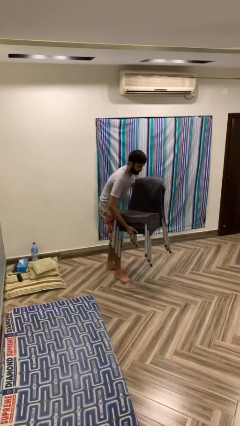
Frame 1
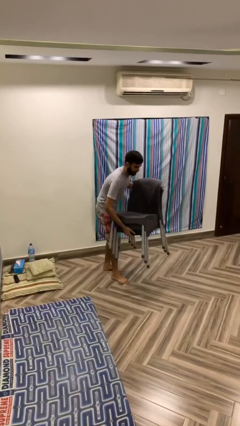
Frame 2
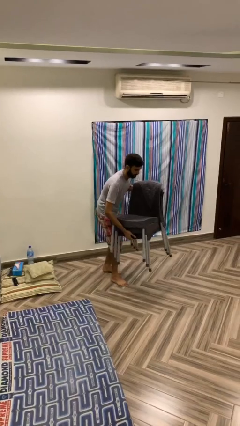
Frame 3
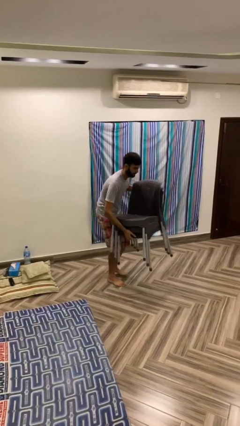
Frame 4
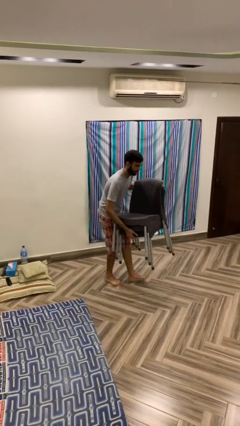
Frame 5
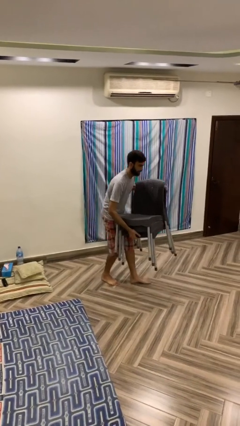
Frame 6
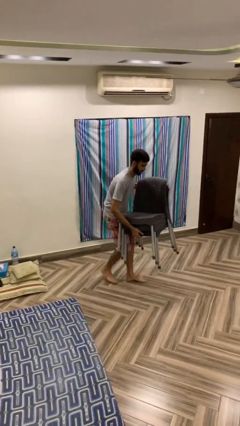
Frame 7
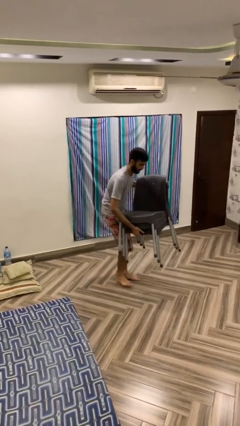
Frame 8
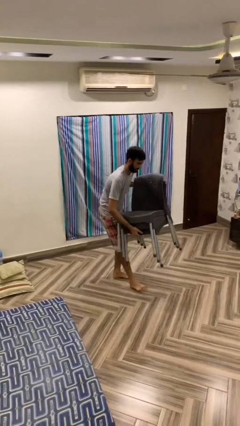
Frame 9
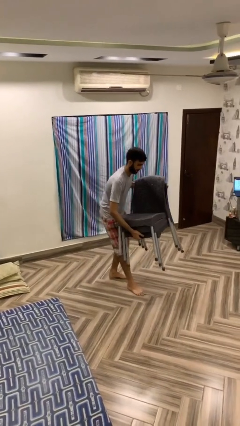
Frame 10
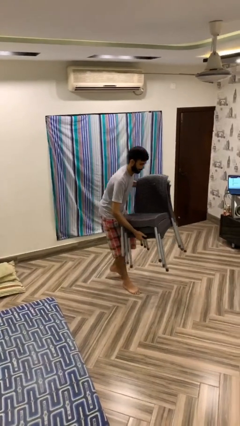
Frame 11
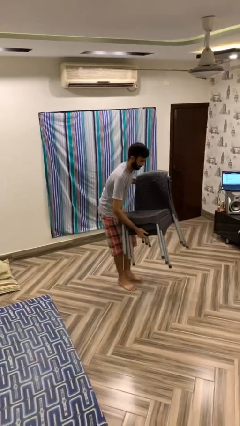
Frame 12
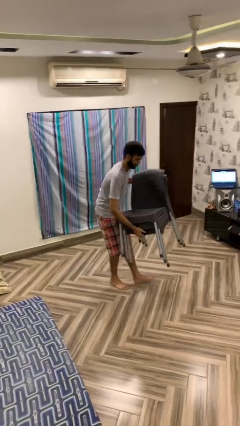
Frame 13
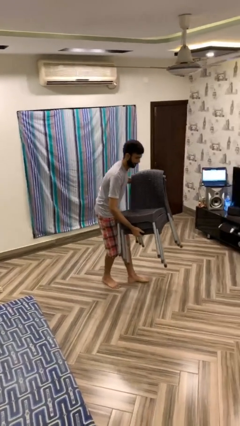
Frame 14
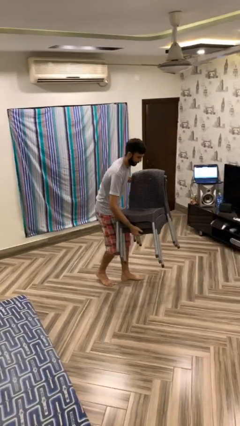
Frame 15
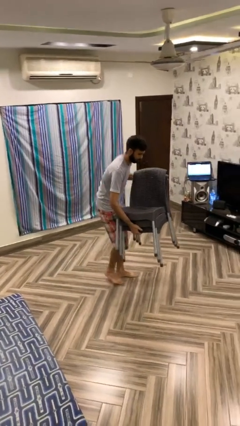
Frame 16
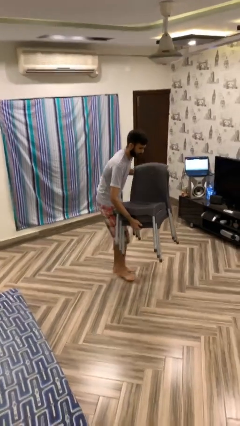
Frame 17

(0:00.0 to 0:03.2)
person carries heavy object

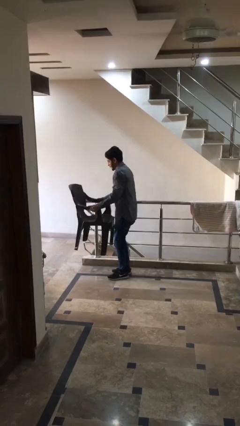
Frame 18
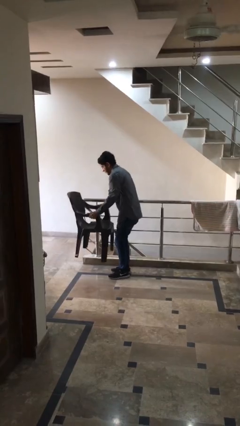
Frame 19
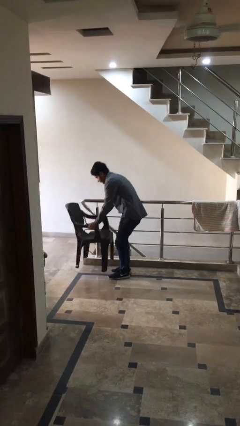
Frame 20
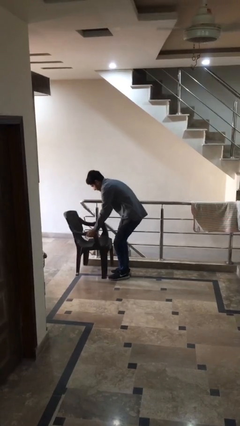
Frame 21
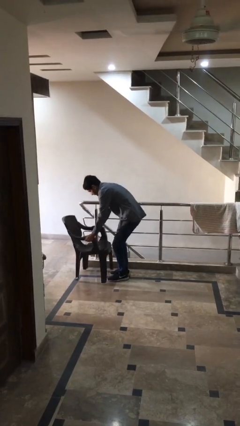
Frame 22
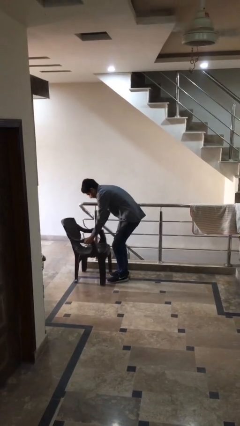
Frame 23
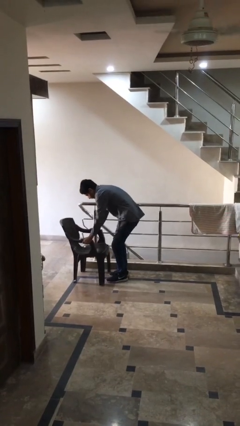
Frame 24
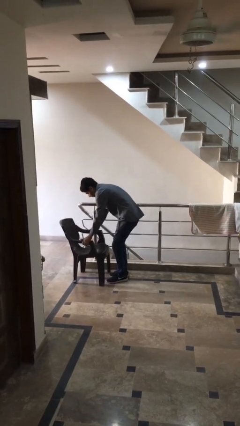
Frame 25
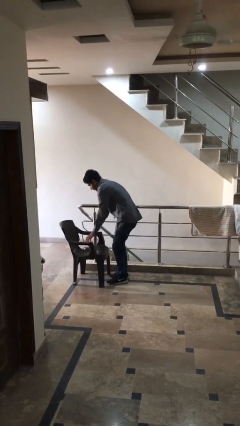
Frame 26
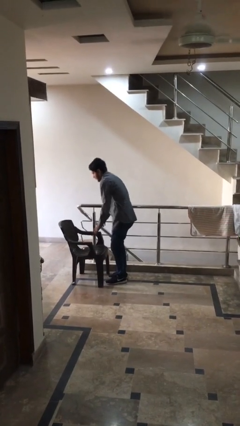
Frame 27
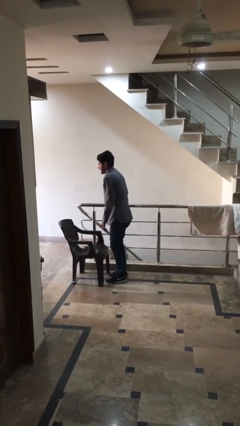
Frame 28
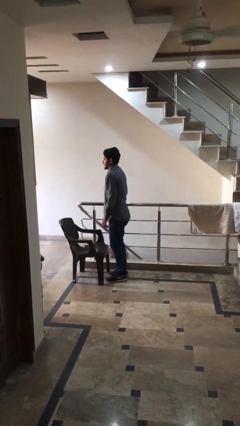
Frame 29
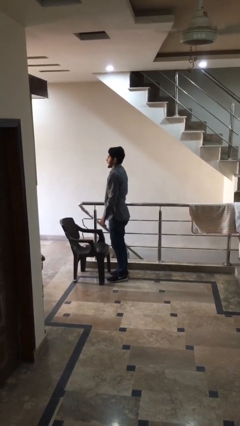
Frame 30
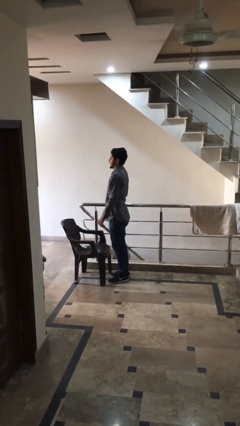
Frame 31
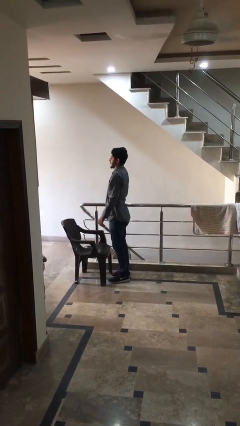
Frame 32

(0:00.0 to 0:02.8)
person puts down object on floor

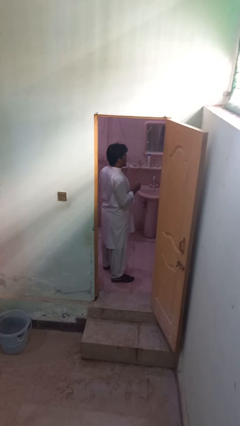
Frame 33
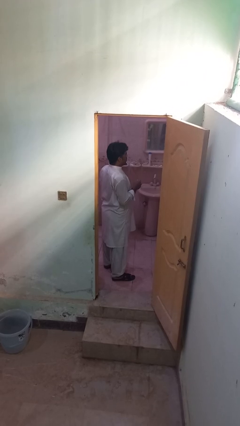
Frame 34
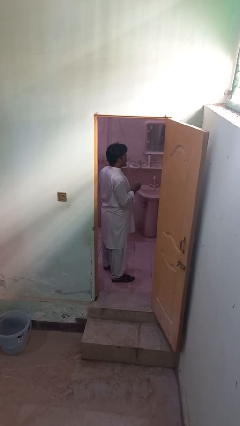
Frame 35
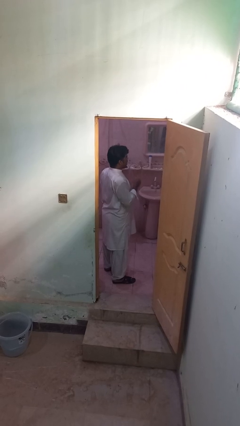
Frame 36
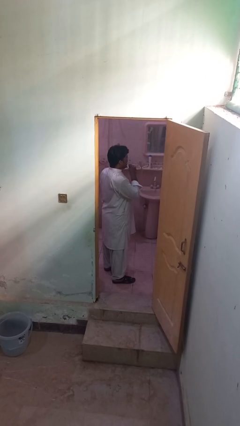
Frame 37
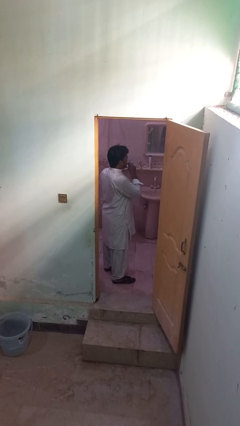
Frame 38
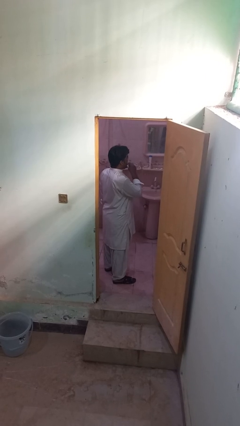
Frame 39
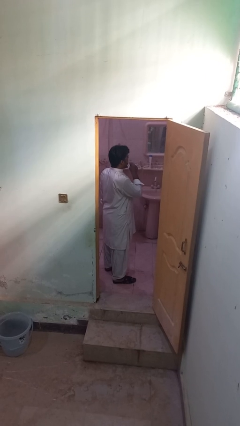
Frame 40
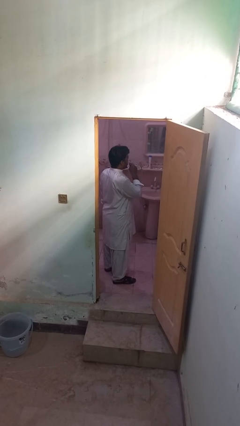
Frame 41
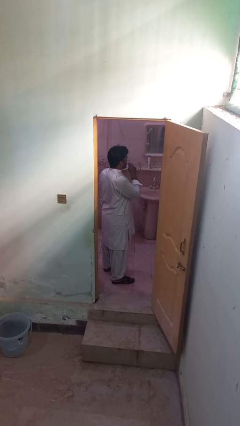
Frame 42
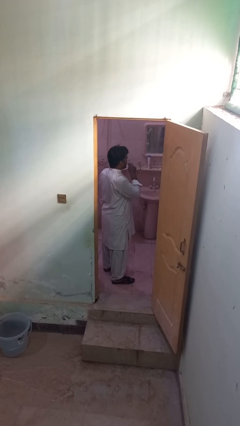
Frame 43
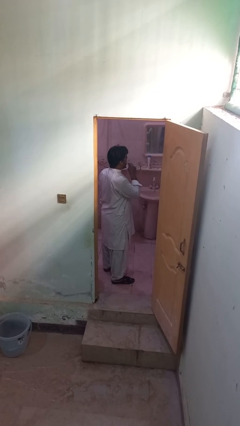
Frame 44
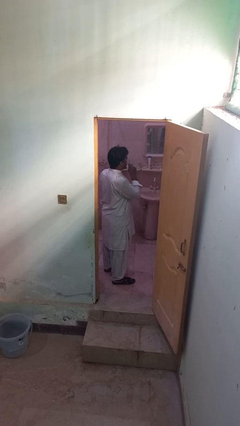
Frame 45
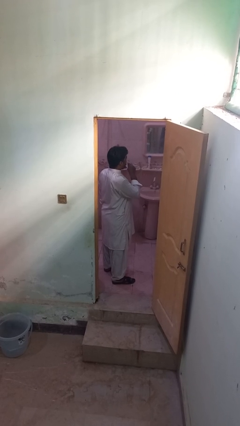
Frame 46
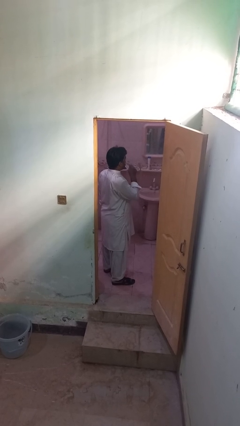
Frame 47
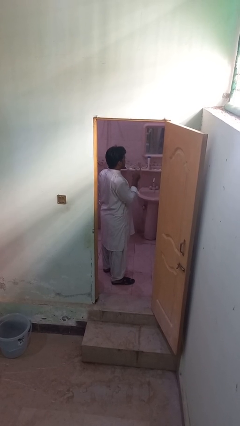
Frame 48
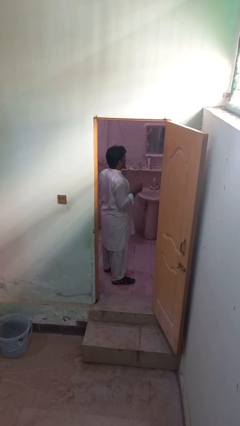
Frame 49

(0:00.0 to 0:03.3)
person flosses

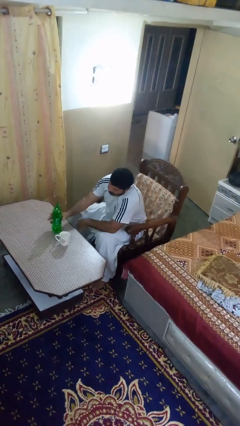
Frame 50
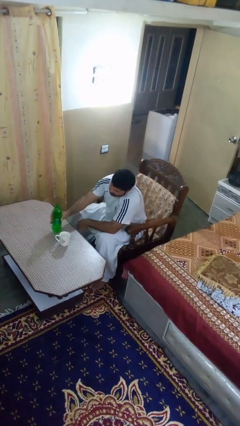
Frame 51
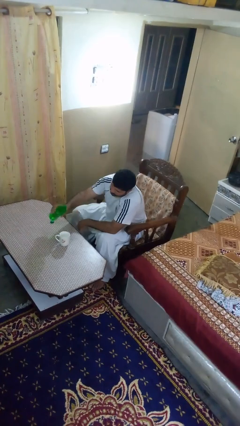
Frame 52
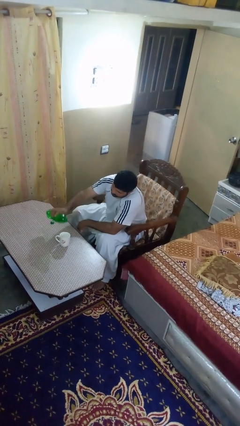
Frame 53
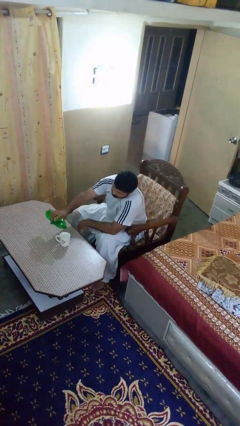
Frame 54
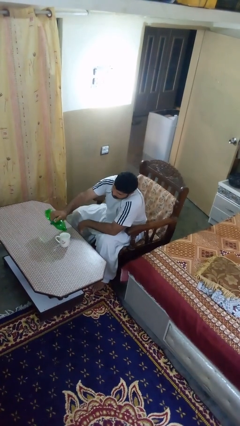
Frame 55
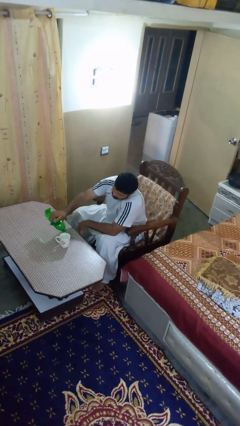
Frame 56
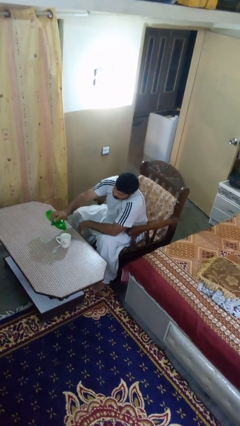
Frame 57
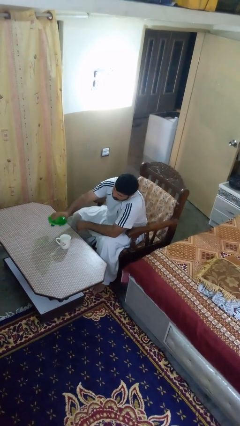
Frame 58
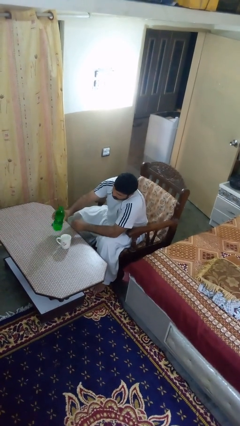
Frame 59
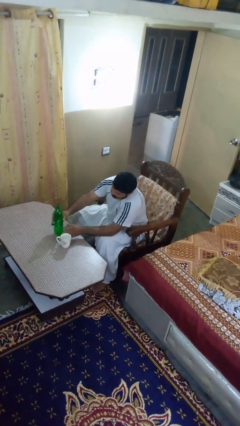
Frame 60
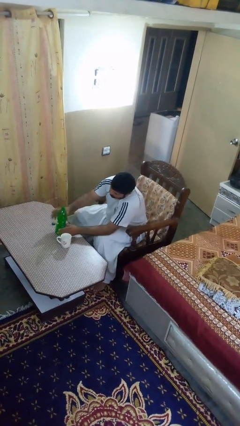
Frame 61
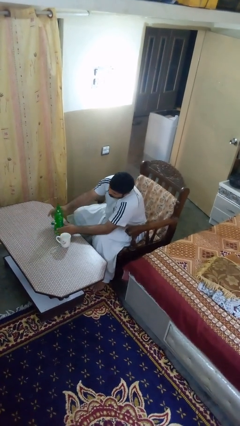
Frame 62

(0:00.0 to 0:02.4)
person pours liquid into cup

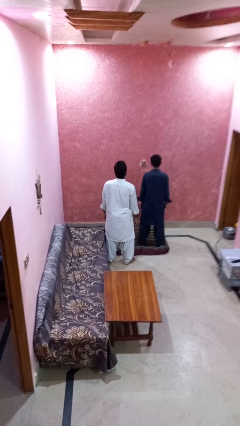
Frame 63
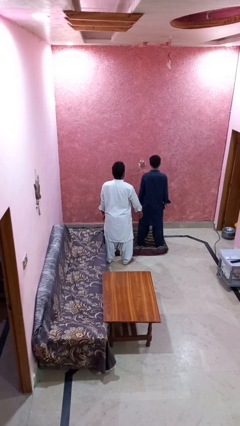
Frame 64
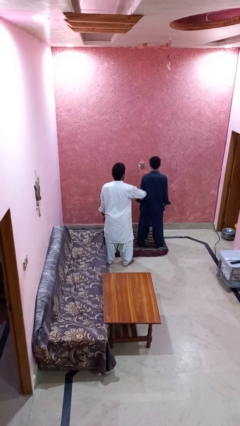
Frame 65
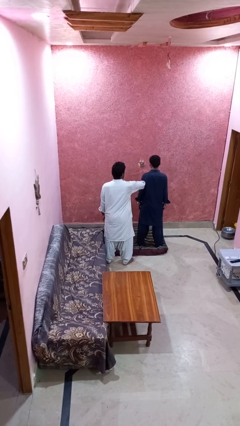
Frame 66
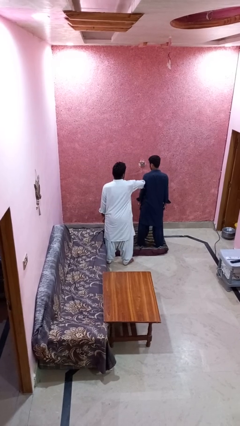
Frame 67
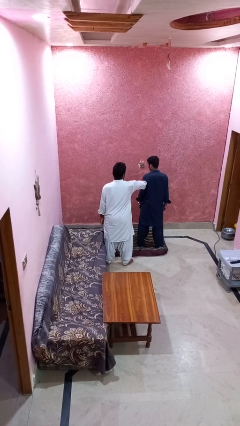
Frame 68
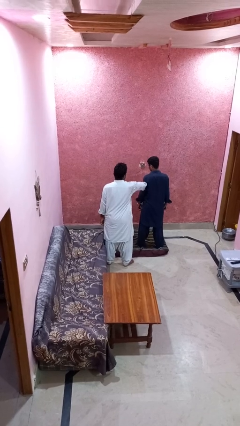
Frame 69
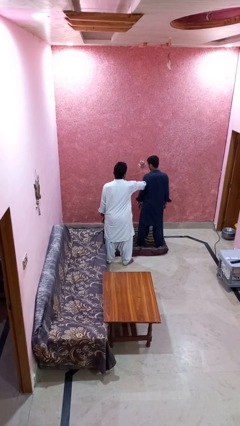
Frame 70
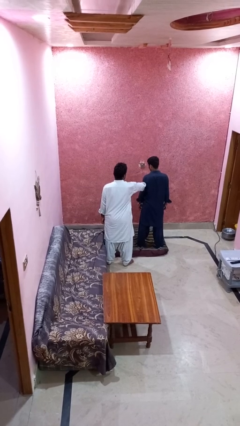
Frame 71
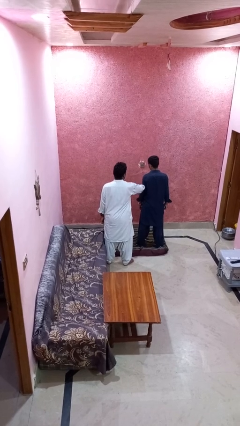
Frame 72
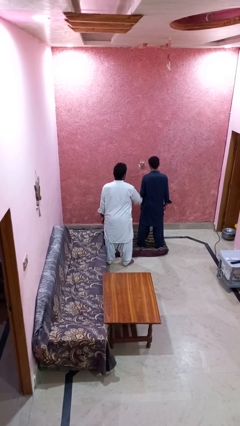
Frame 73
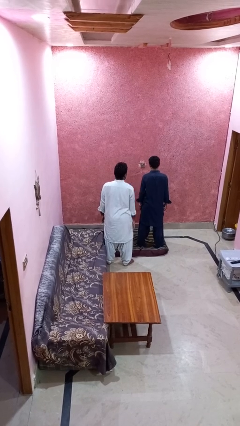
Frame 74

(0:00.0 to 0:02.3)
person grabs person by forearm

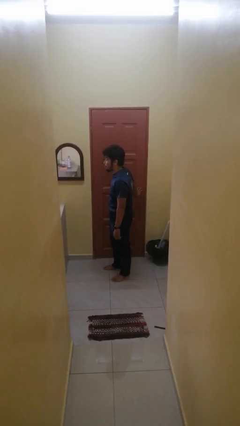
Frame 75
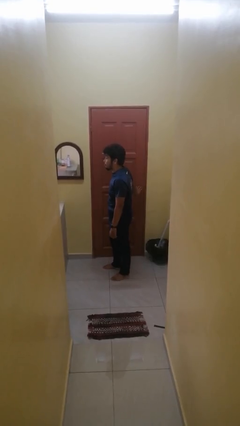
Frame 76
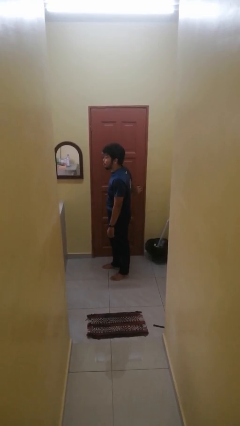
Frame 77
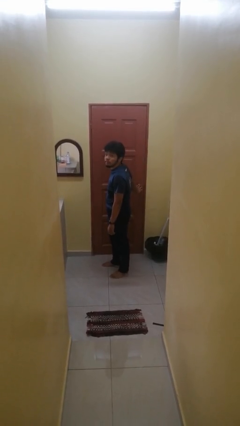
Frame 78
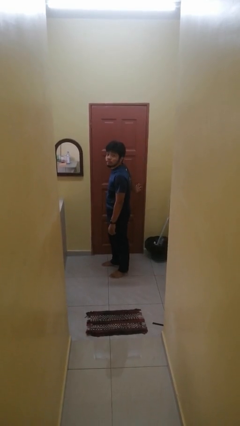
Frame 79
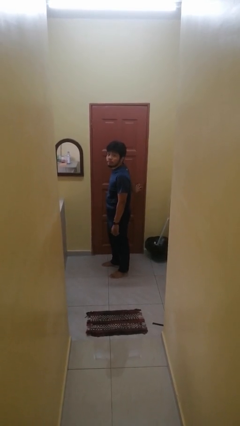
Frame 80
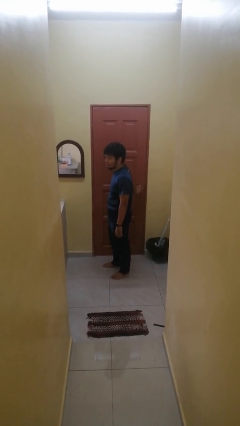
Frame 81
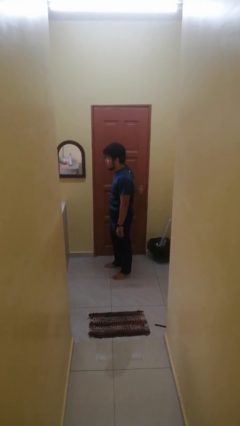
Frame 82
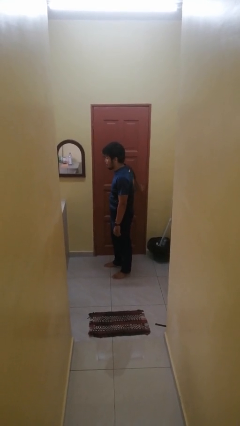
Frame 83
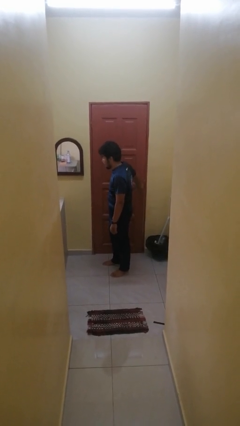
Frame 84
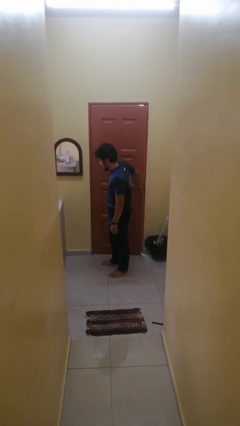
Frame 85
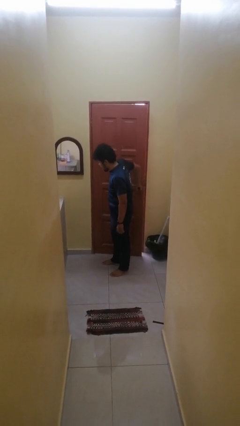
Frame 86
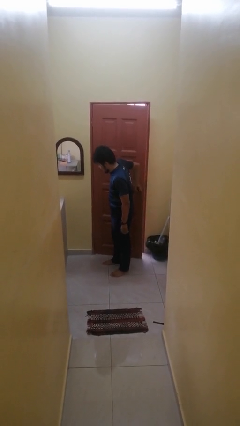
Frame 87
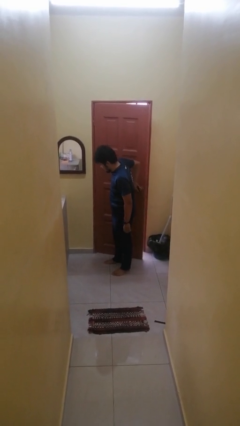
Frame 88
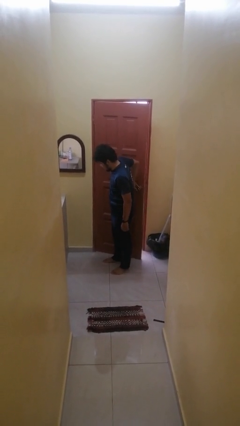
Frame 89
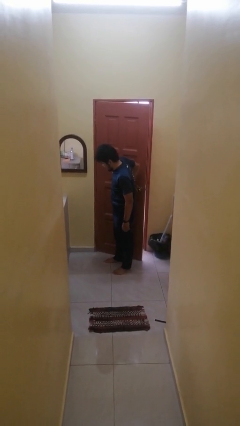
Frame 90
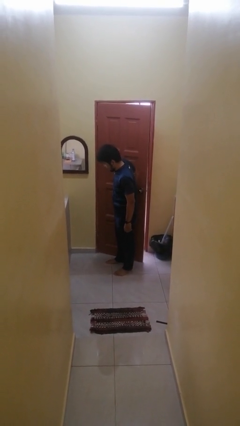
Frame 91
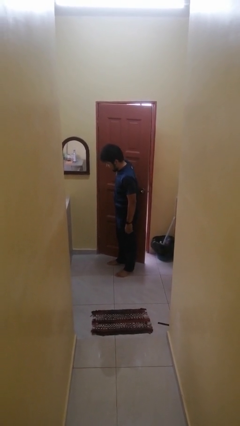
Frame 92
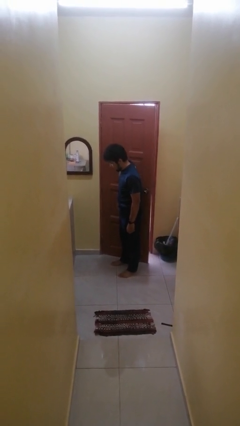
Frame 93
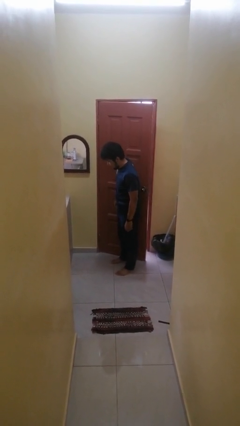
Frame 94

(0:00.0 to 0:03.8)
person opens facility door

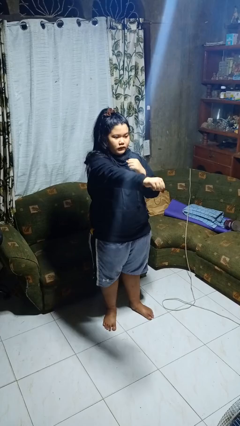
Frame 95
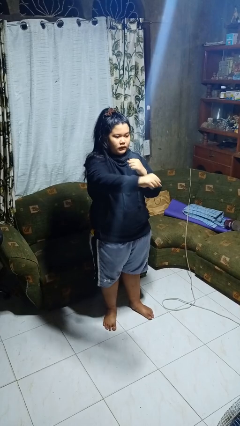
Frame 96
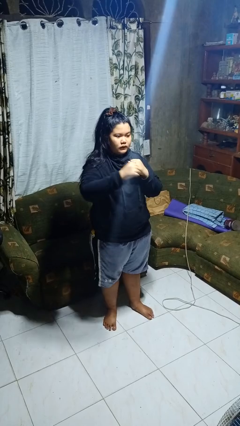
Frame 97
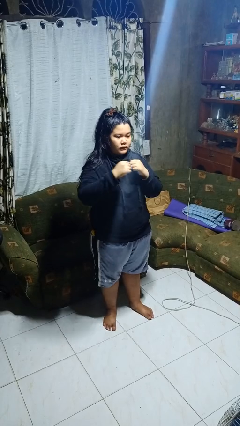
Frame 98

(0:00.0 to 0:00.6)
person punches
